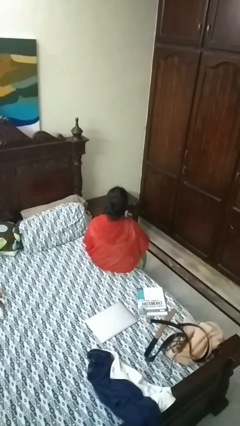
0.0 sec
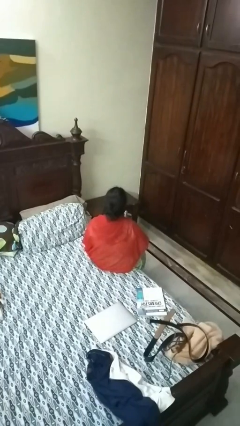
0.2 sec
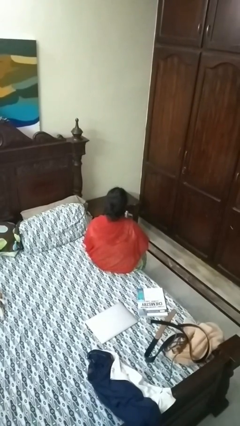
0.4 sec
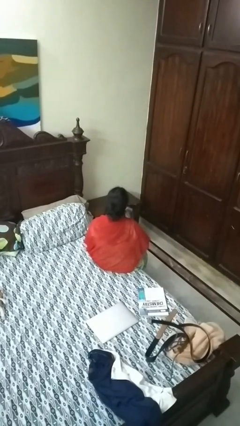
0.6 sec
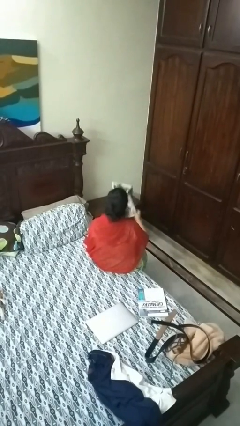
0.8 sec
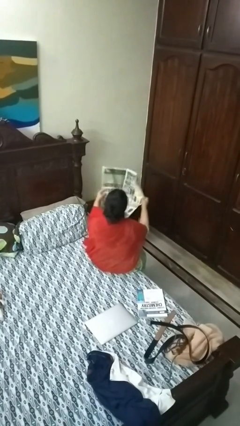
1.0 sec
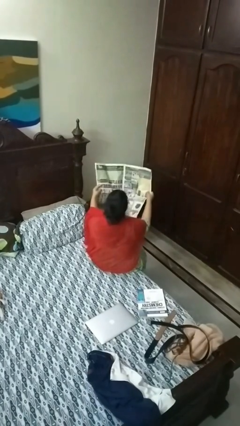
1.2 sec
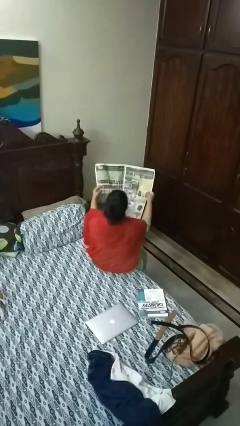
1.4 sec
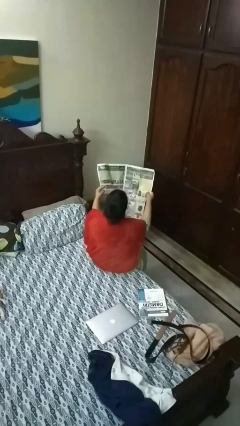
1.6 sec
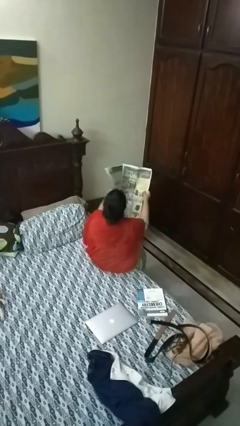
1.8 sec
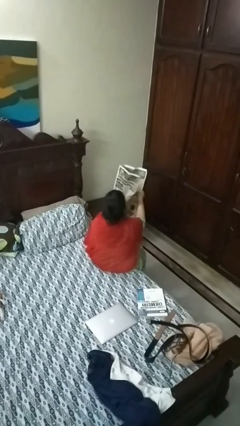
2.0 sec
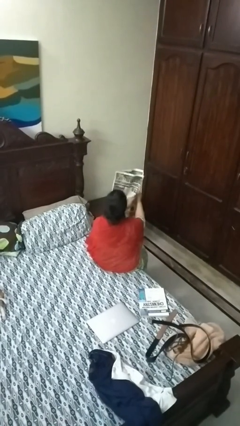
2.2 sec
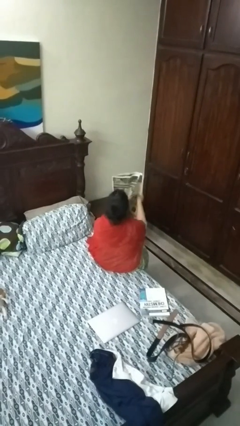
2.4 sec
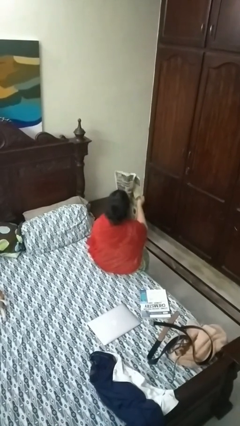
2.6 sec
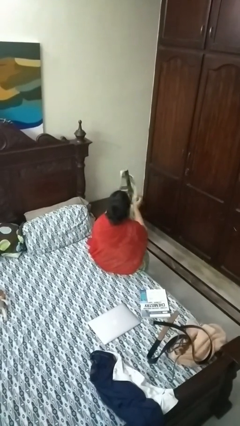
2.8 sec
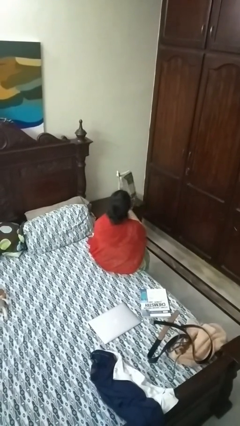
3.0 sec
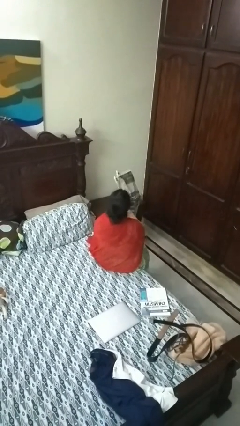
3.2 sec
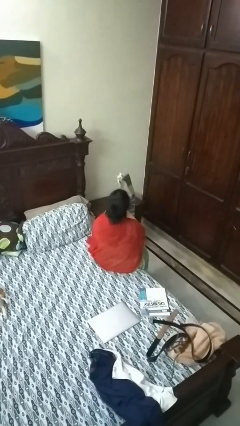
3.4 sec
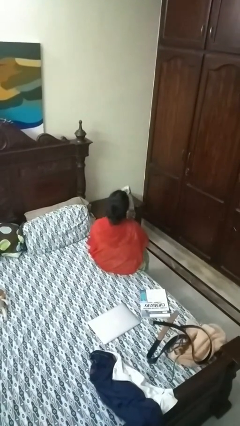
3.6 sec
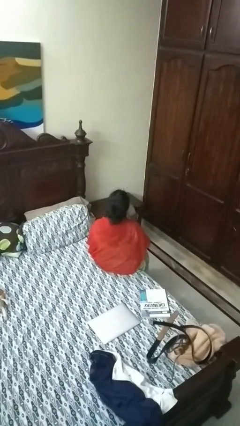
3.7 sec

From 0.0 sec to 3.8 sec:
person reads newspaper

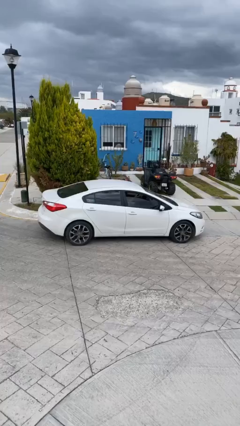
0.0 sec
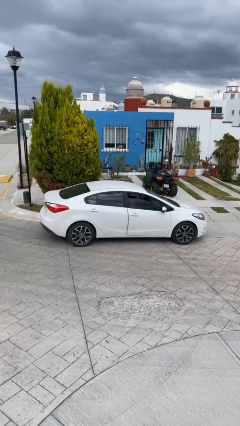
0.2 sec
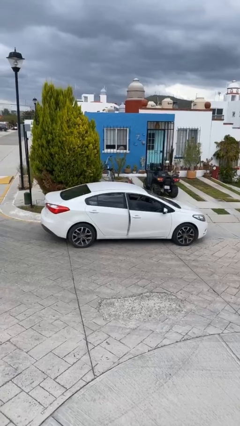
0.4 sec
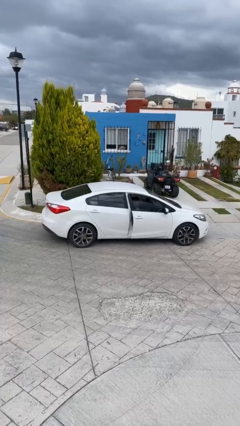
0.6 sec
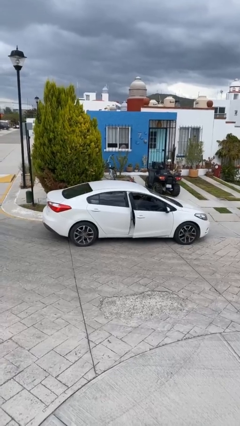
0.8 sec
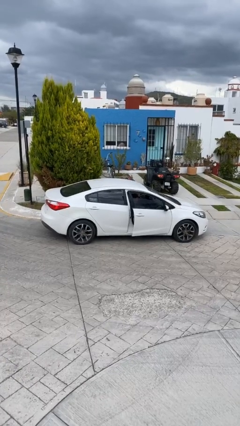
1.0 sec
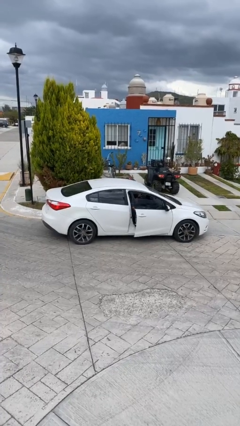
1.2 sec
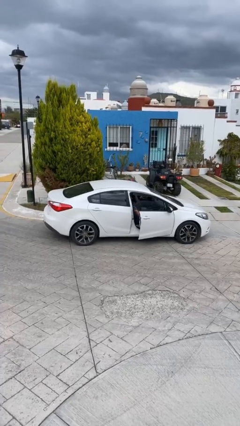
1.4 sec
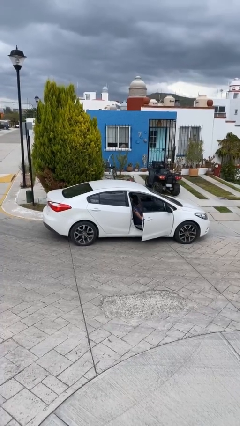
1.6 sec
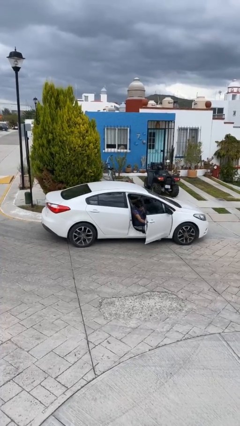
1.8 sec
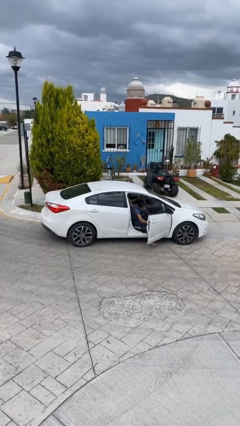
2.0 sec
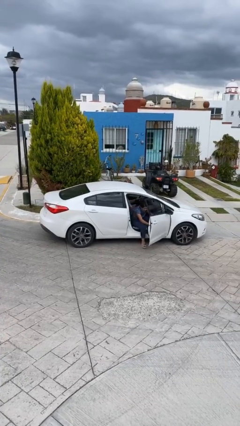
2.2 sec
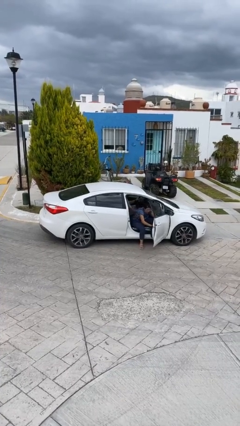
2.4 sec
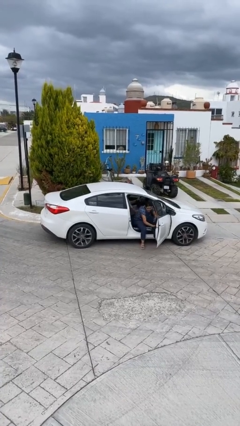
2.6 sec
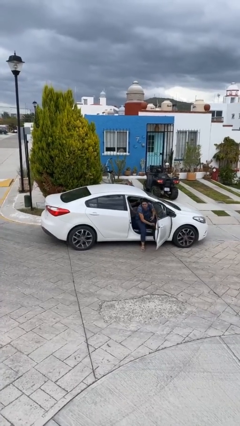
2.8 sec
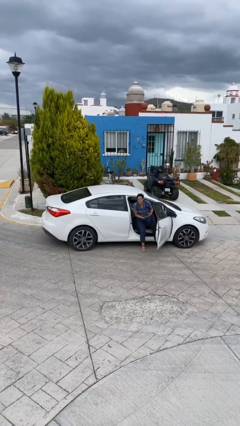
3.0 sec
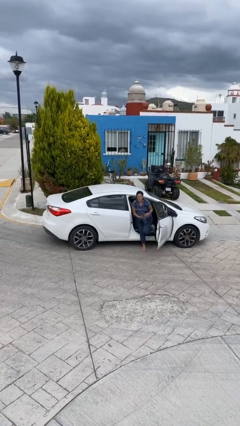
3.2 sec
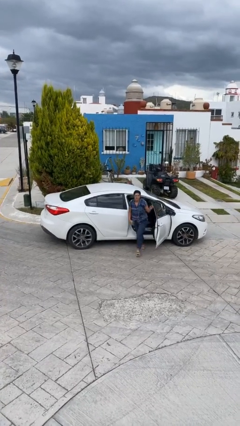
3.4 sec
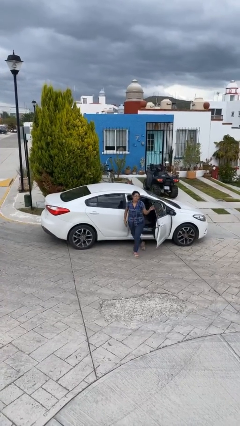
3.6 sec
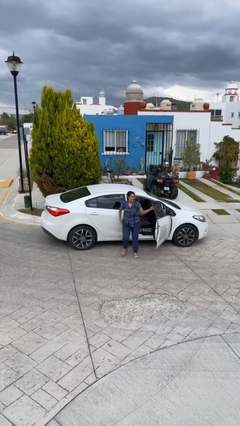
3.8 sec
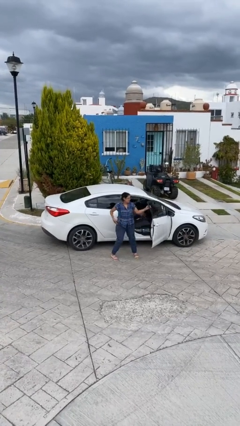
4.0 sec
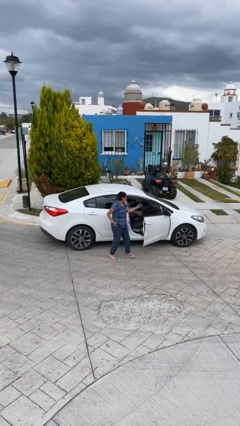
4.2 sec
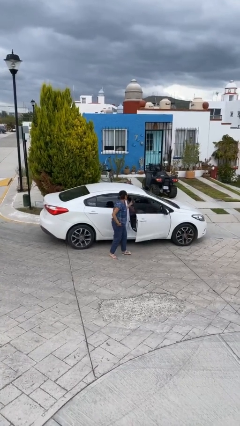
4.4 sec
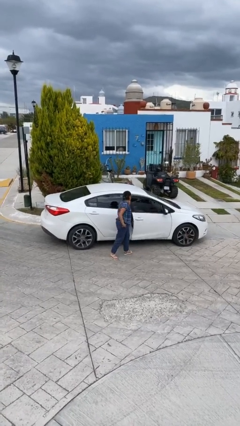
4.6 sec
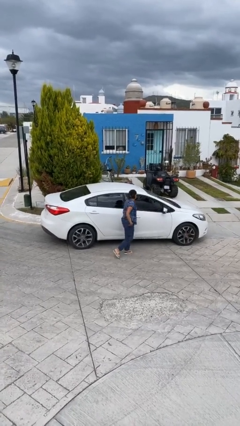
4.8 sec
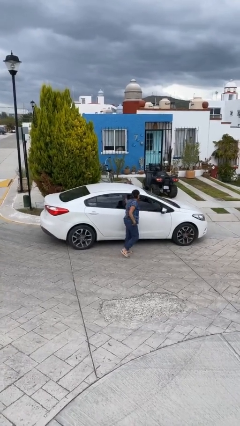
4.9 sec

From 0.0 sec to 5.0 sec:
car drops off person

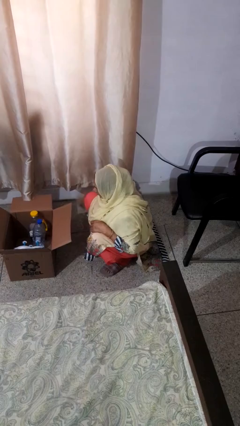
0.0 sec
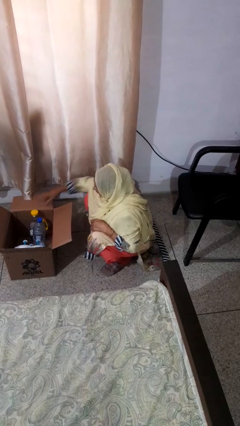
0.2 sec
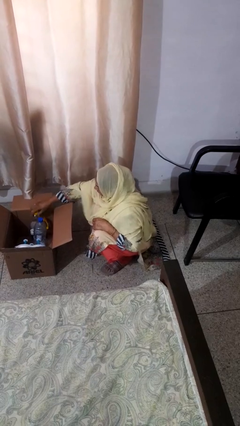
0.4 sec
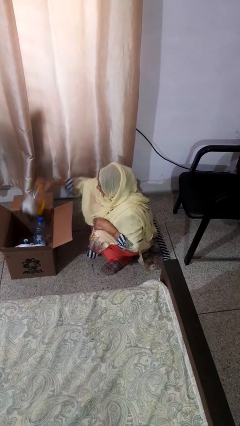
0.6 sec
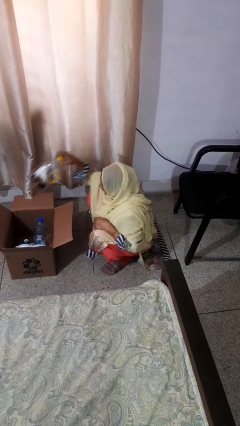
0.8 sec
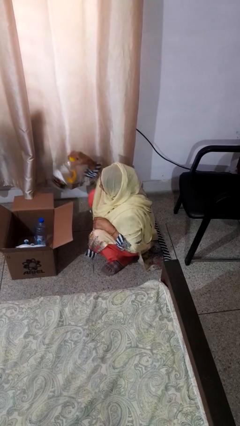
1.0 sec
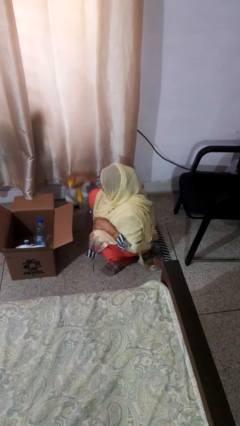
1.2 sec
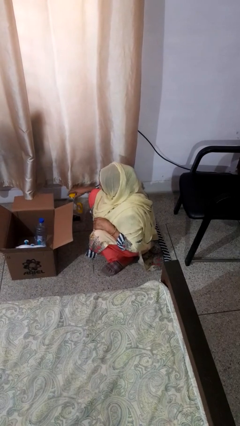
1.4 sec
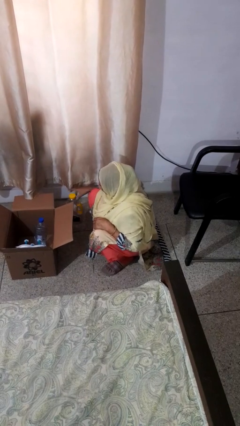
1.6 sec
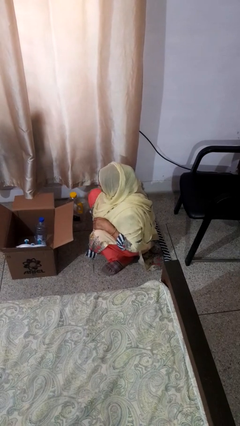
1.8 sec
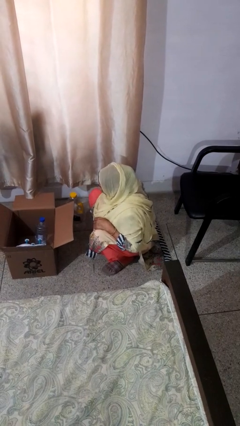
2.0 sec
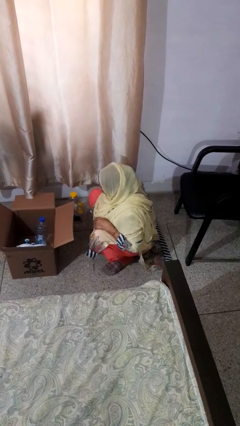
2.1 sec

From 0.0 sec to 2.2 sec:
person takes object from box

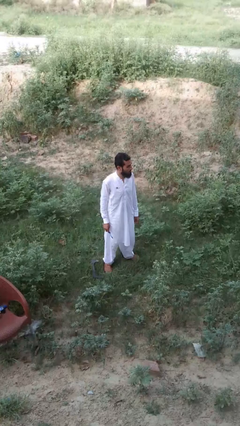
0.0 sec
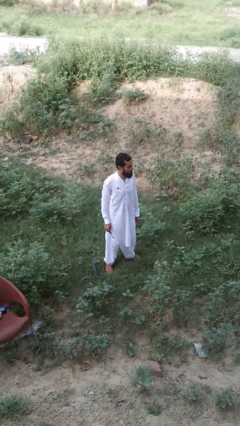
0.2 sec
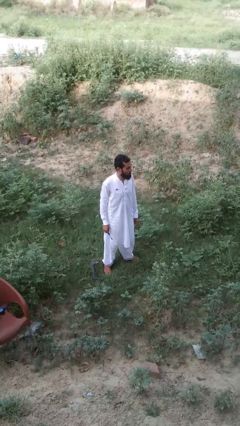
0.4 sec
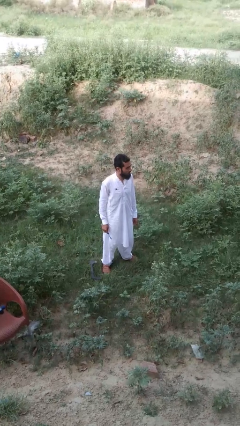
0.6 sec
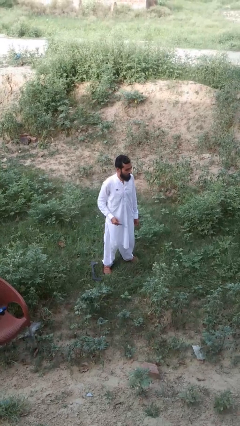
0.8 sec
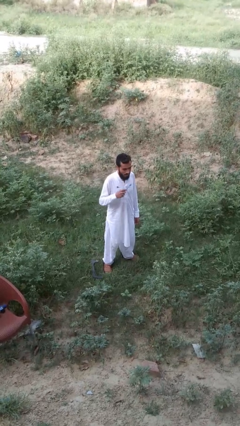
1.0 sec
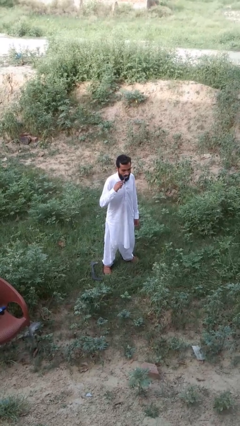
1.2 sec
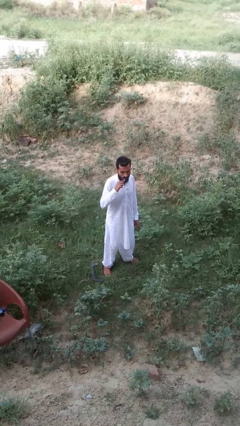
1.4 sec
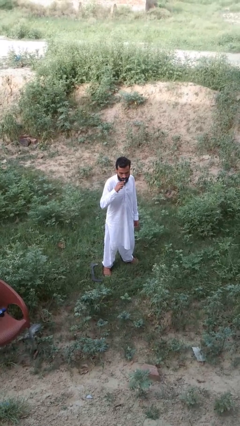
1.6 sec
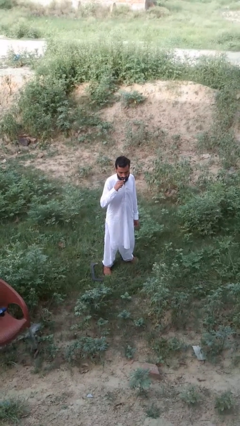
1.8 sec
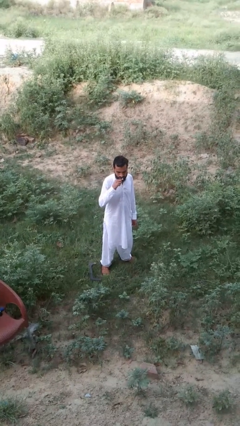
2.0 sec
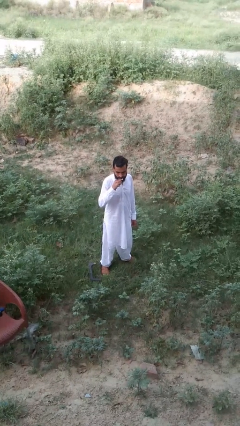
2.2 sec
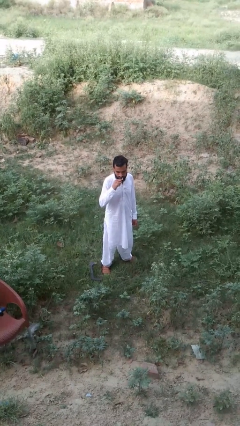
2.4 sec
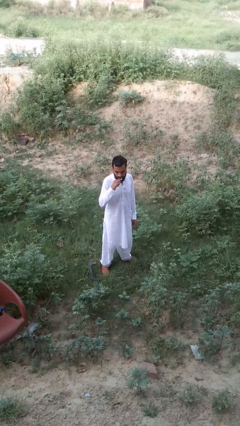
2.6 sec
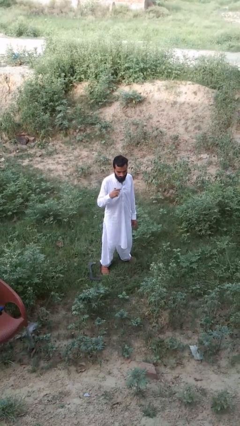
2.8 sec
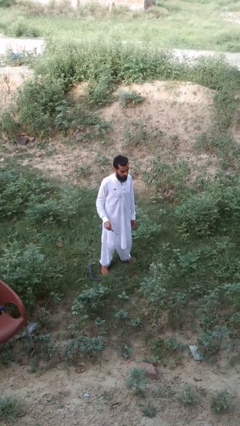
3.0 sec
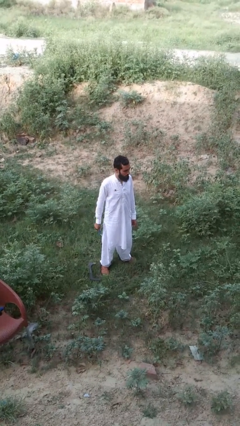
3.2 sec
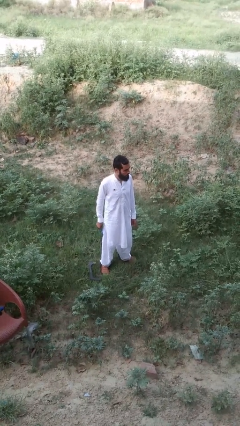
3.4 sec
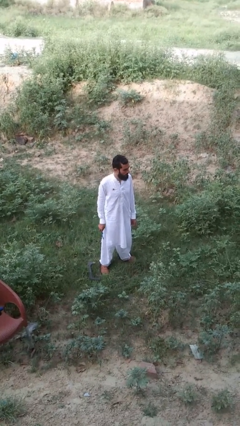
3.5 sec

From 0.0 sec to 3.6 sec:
person brushes teeth

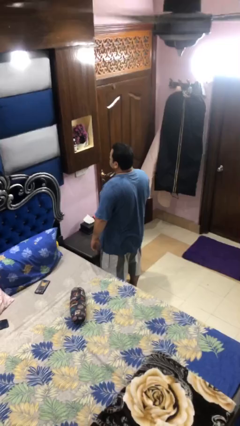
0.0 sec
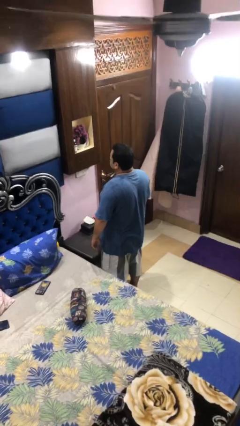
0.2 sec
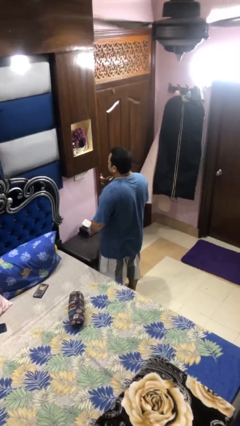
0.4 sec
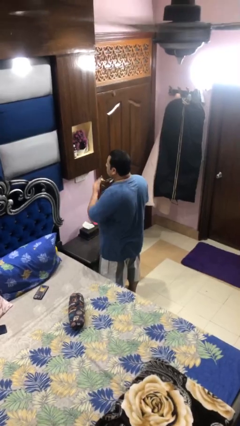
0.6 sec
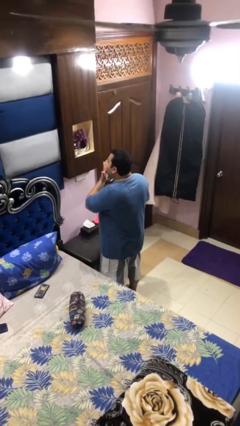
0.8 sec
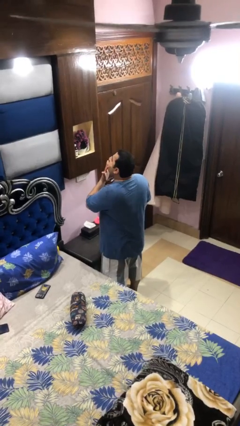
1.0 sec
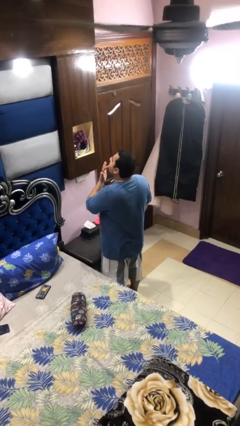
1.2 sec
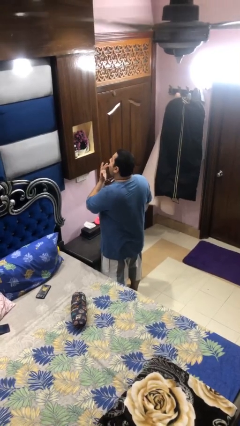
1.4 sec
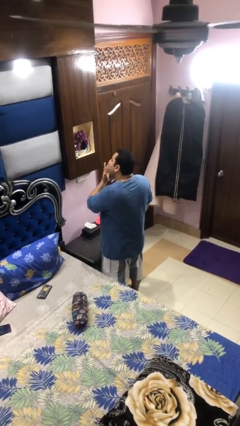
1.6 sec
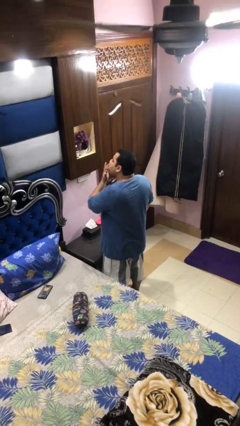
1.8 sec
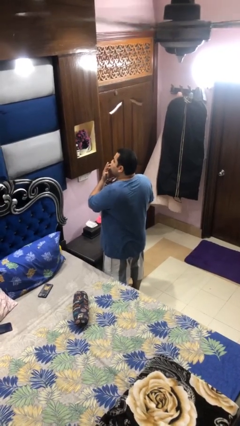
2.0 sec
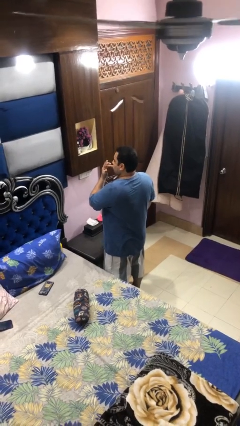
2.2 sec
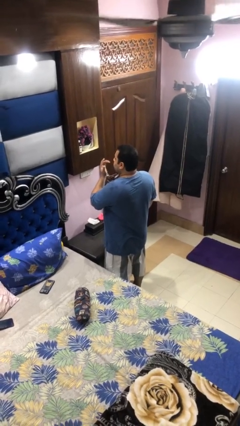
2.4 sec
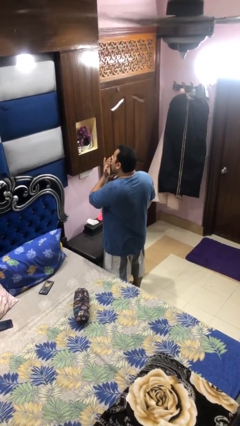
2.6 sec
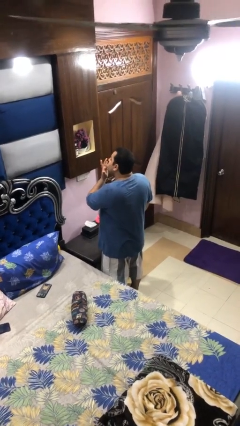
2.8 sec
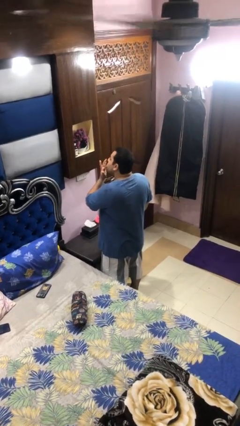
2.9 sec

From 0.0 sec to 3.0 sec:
person licks fingers
